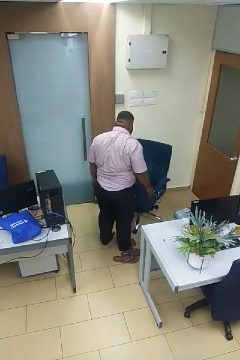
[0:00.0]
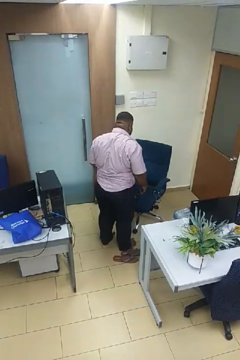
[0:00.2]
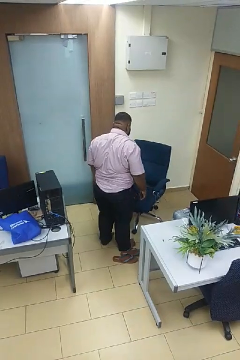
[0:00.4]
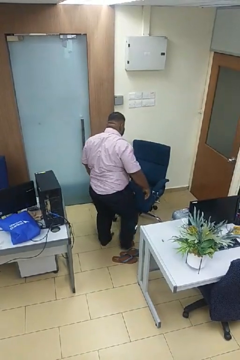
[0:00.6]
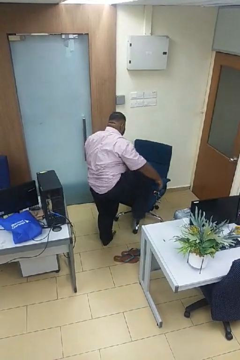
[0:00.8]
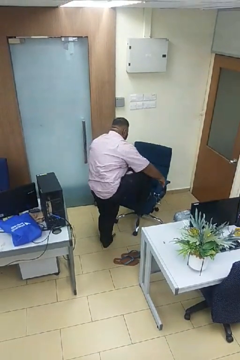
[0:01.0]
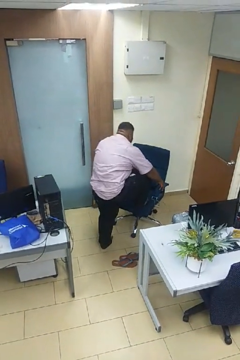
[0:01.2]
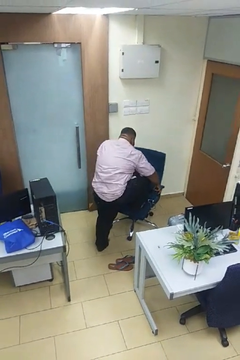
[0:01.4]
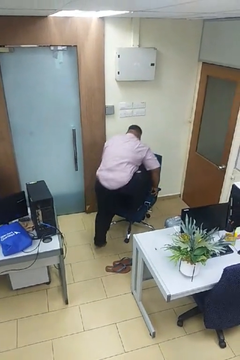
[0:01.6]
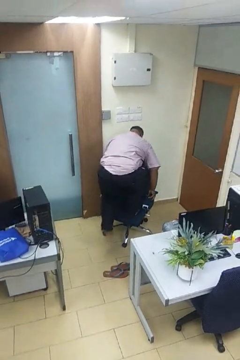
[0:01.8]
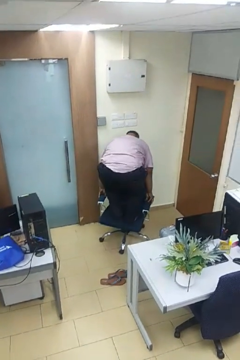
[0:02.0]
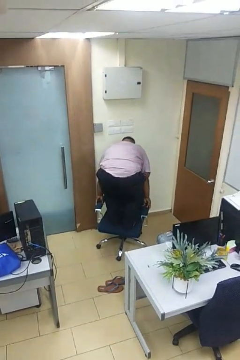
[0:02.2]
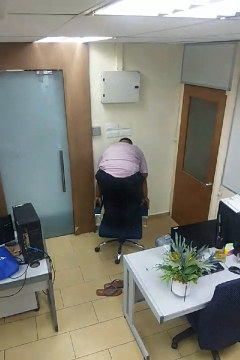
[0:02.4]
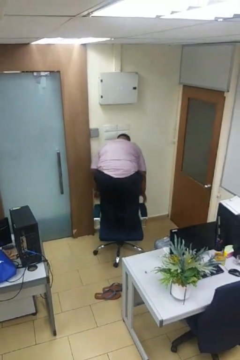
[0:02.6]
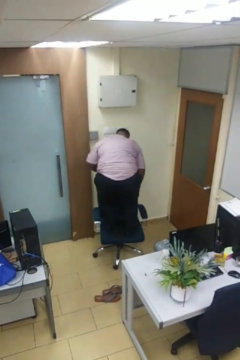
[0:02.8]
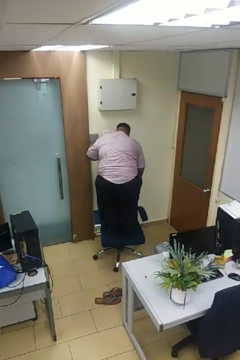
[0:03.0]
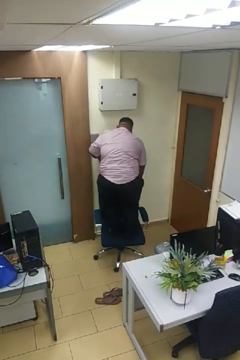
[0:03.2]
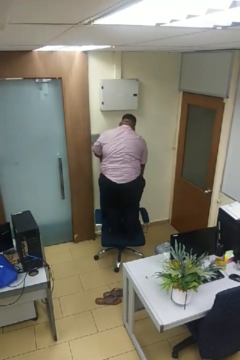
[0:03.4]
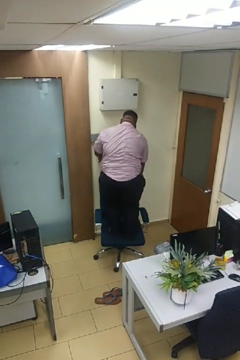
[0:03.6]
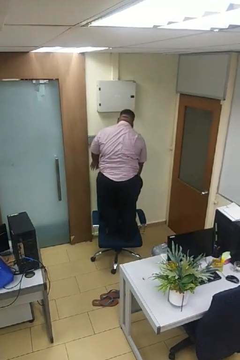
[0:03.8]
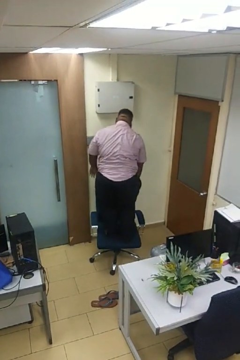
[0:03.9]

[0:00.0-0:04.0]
person climbs on chair

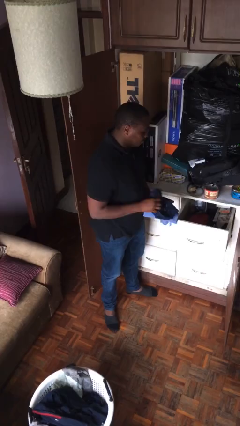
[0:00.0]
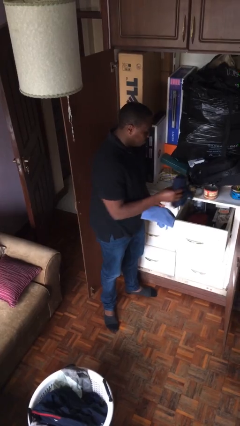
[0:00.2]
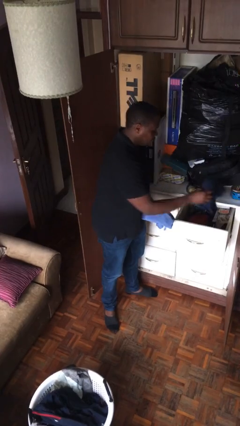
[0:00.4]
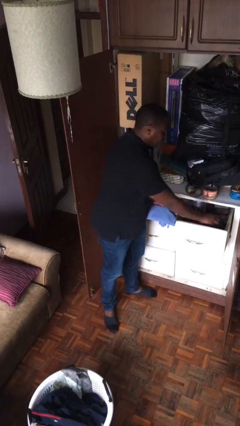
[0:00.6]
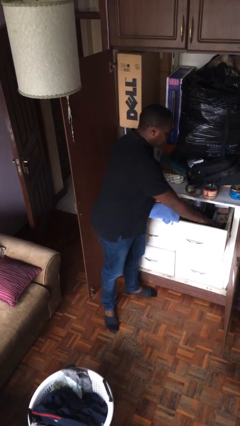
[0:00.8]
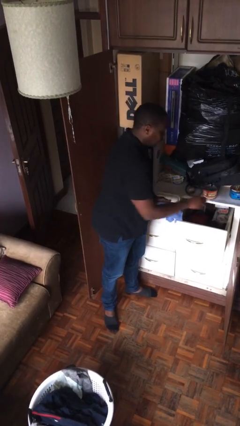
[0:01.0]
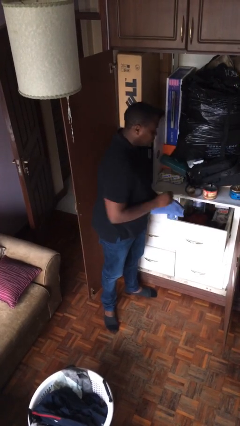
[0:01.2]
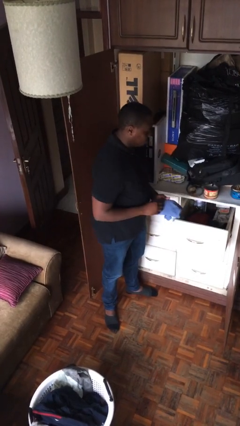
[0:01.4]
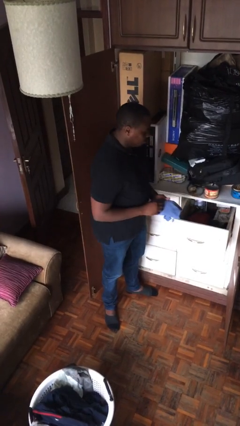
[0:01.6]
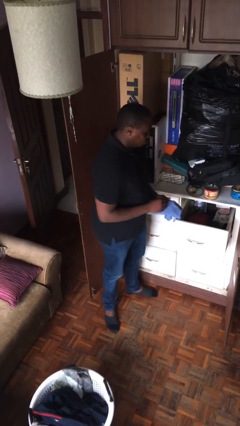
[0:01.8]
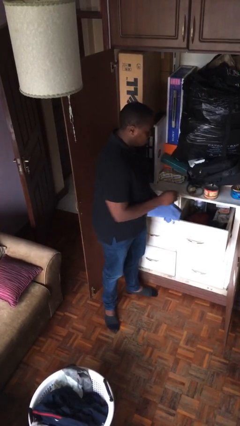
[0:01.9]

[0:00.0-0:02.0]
person puts clothes into dresser

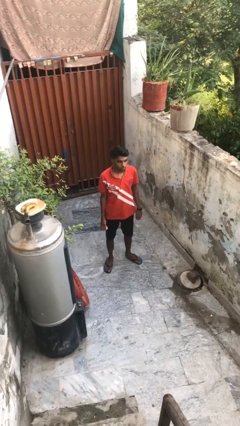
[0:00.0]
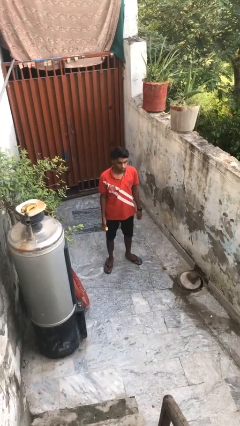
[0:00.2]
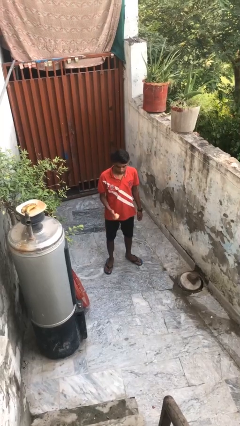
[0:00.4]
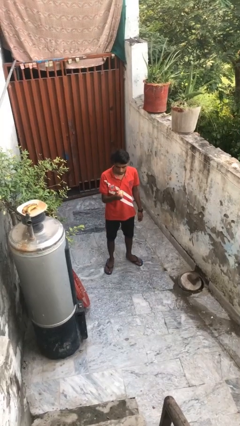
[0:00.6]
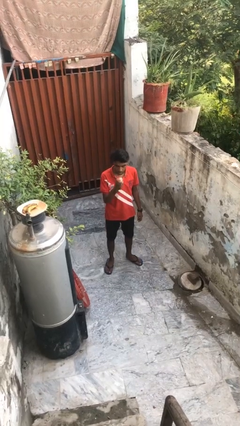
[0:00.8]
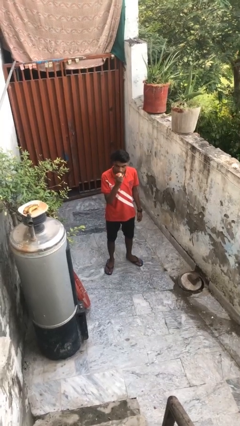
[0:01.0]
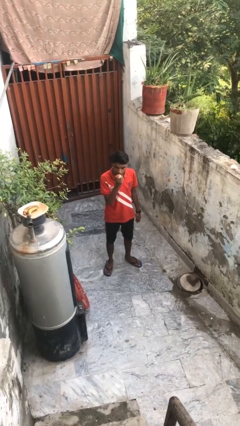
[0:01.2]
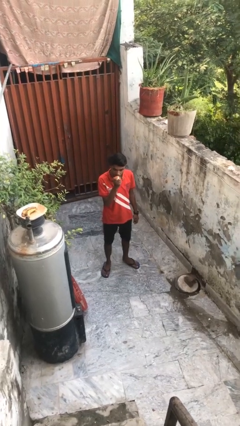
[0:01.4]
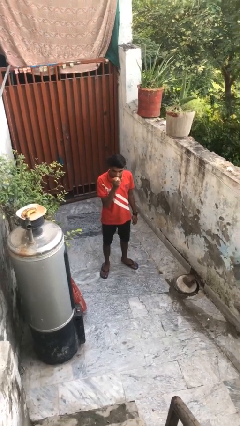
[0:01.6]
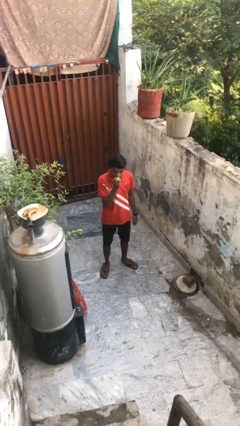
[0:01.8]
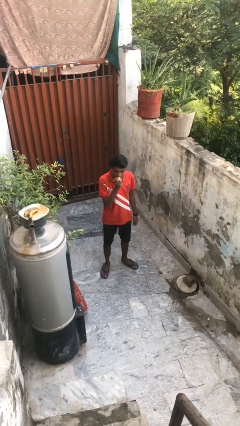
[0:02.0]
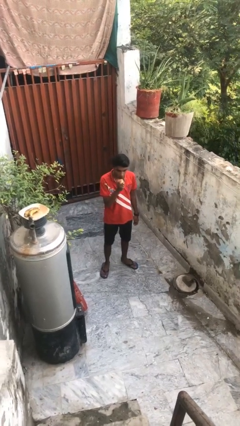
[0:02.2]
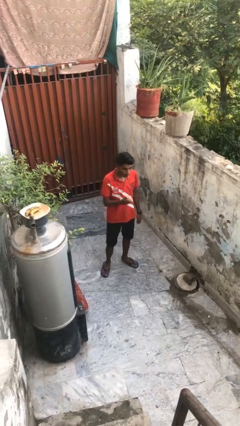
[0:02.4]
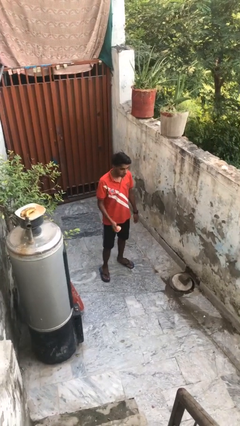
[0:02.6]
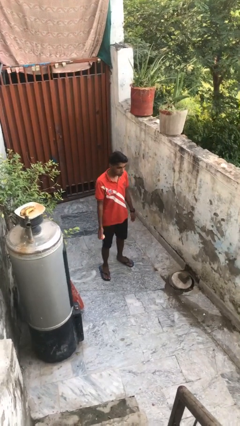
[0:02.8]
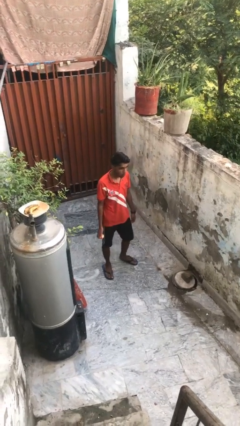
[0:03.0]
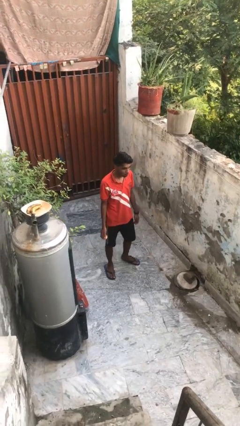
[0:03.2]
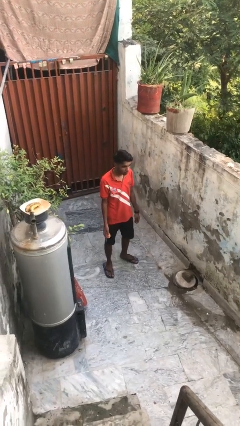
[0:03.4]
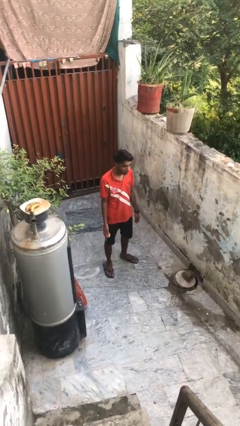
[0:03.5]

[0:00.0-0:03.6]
person eats apple

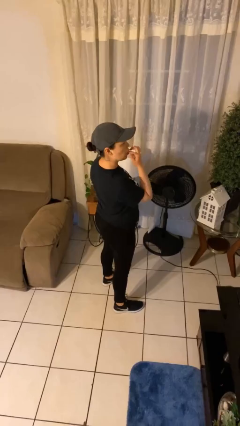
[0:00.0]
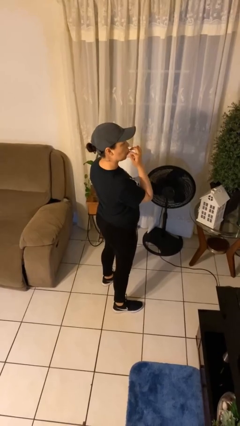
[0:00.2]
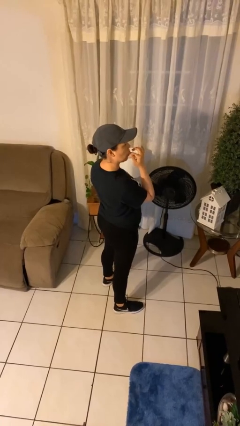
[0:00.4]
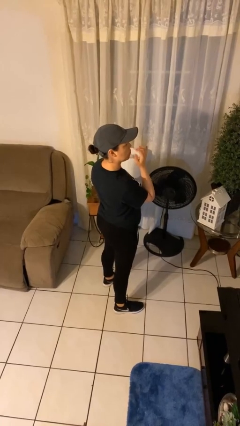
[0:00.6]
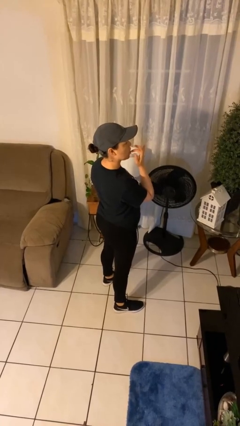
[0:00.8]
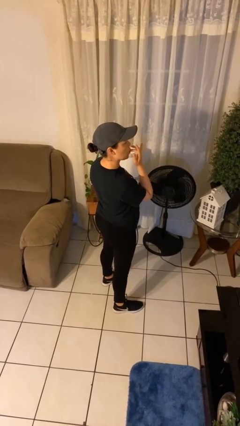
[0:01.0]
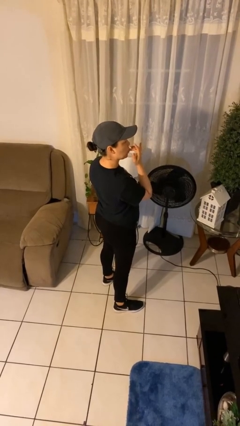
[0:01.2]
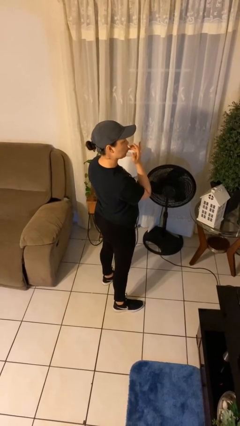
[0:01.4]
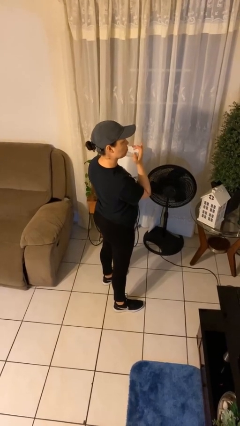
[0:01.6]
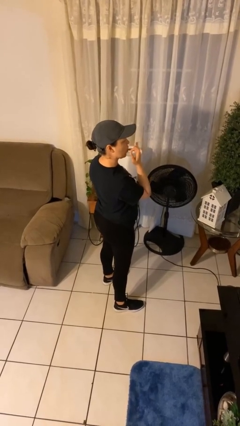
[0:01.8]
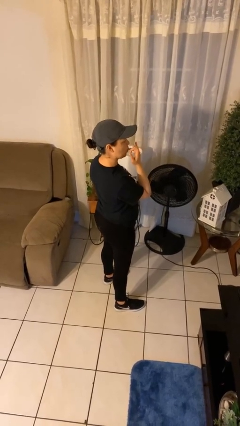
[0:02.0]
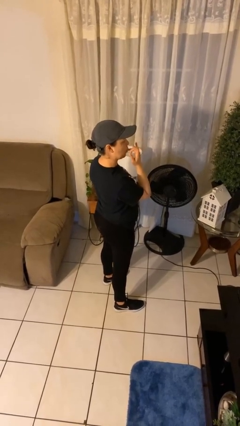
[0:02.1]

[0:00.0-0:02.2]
person licks fingers

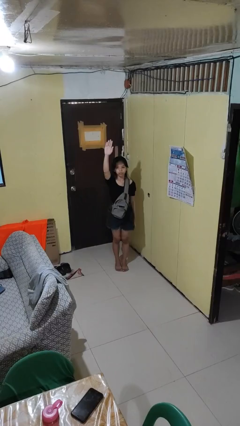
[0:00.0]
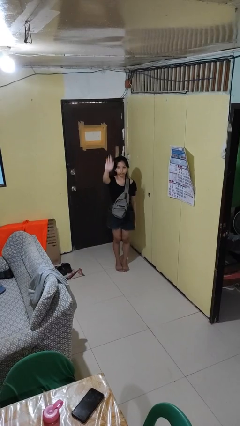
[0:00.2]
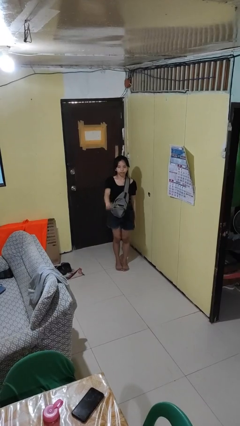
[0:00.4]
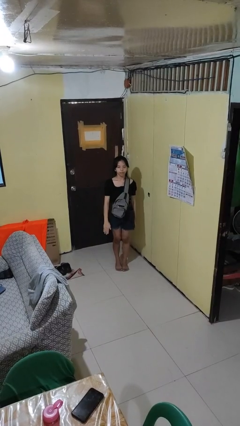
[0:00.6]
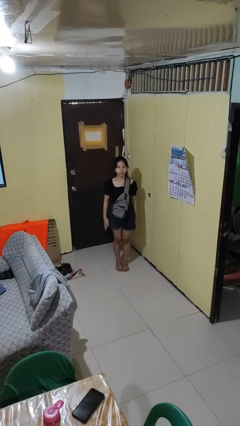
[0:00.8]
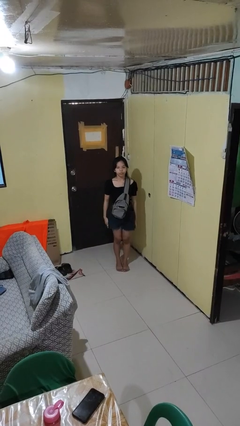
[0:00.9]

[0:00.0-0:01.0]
person gestures swipe down

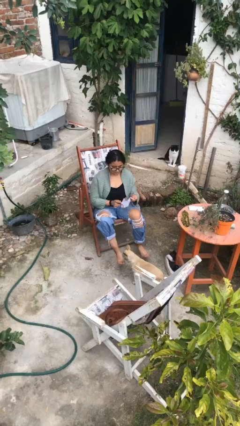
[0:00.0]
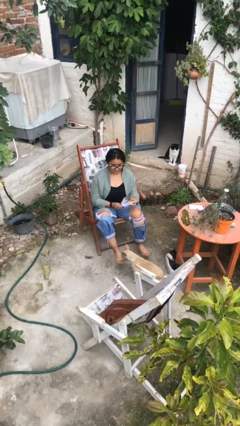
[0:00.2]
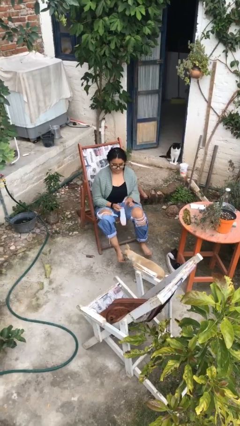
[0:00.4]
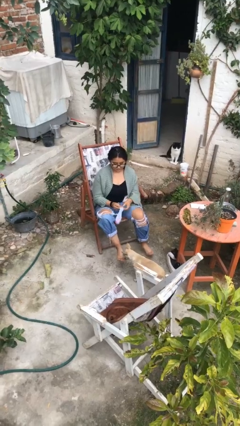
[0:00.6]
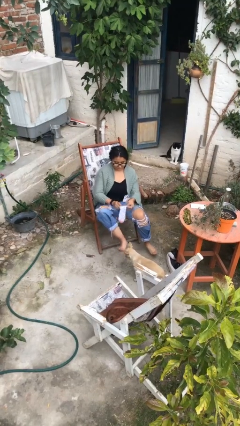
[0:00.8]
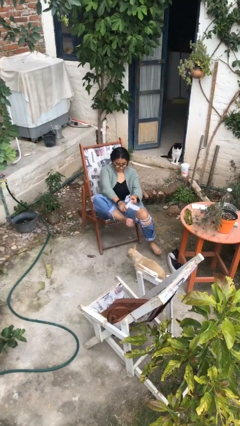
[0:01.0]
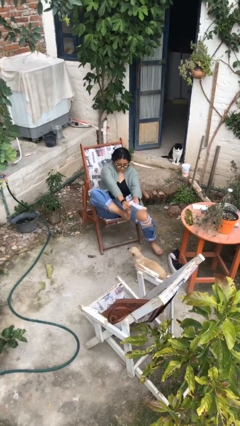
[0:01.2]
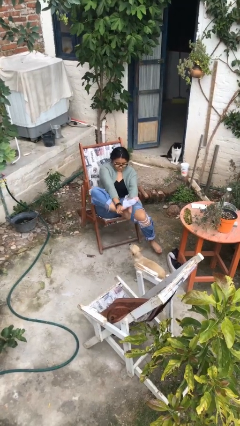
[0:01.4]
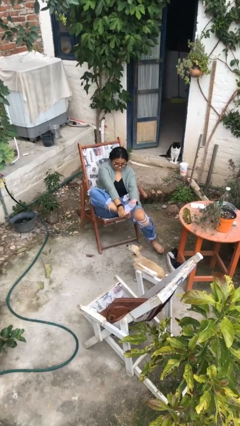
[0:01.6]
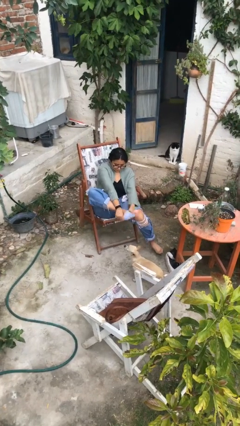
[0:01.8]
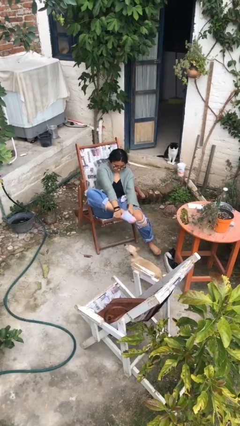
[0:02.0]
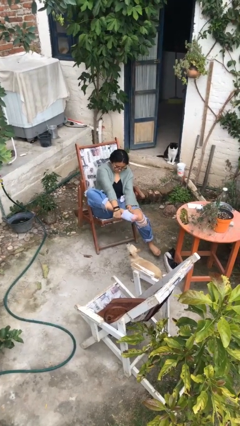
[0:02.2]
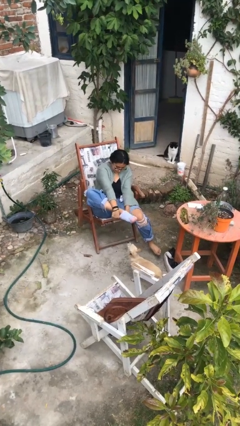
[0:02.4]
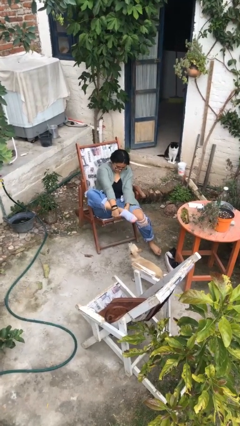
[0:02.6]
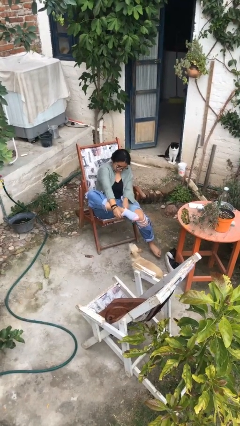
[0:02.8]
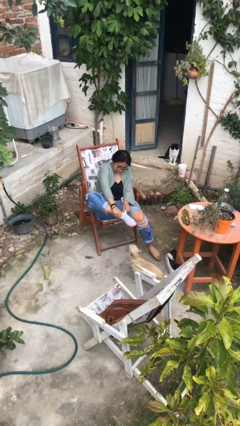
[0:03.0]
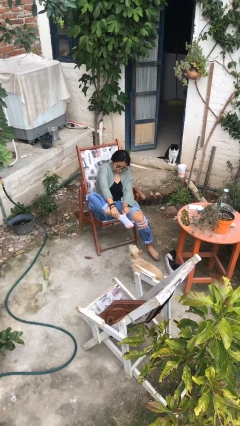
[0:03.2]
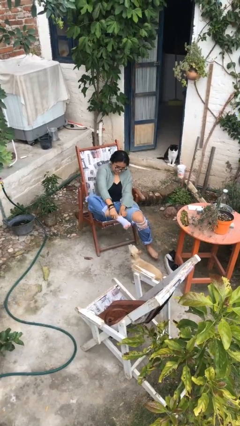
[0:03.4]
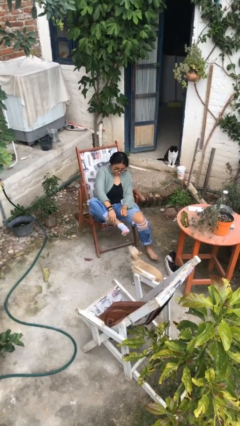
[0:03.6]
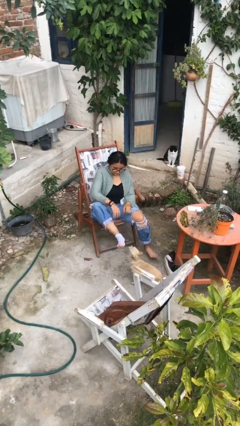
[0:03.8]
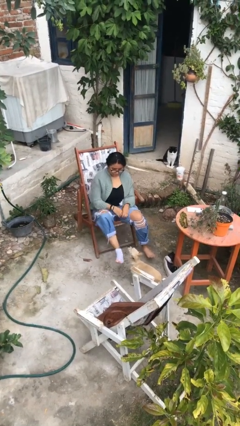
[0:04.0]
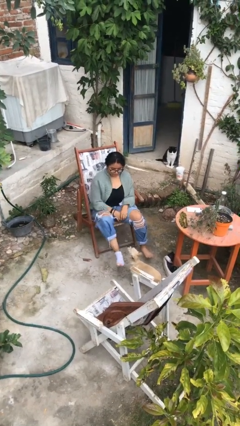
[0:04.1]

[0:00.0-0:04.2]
person puts on socks

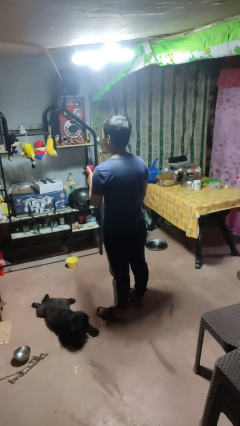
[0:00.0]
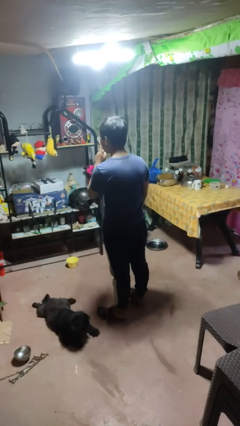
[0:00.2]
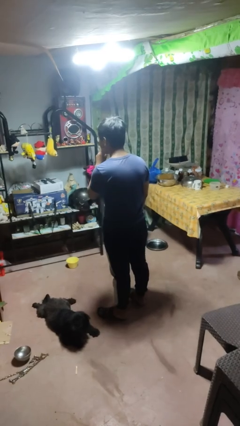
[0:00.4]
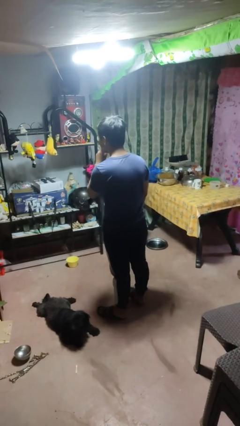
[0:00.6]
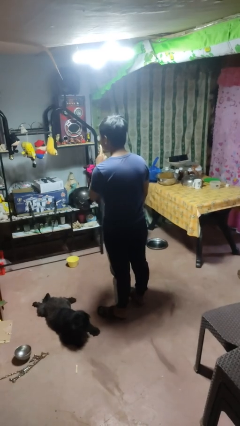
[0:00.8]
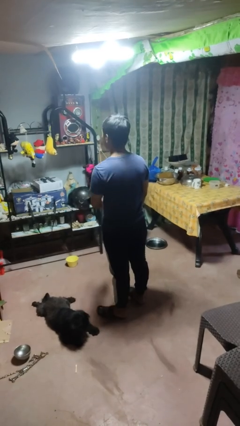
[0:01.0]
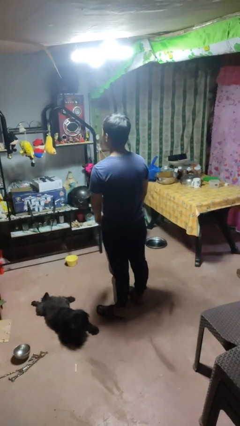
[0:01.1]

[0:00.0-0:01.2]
person gestures be quiet
